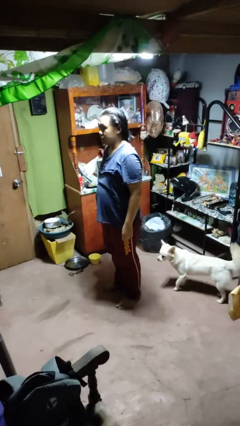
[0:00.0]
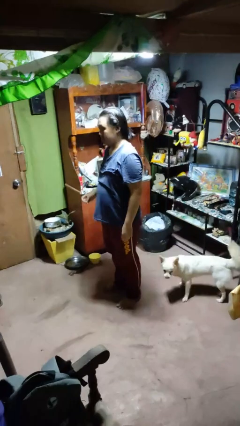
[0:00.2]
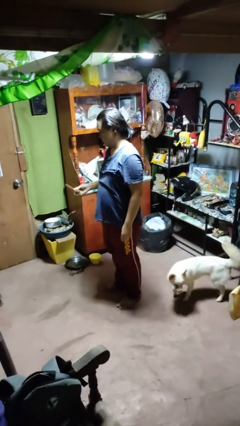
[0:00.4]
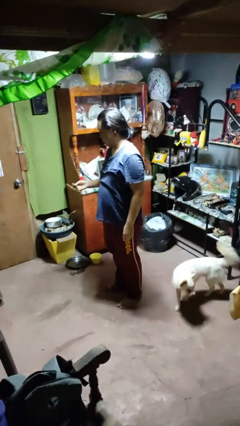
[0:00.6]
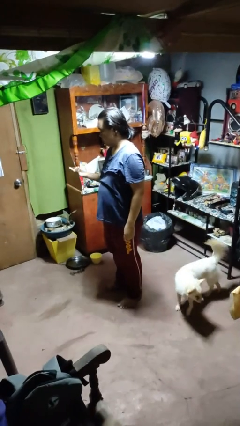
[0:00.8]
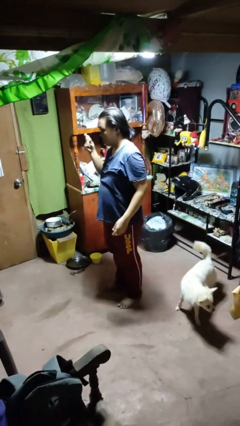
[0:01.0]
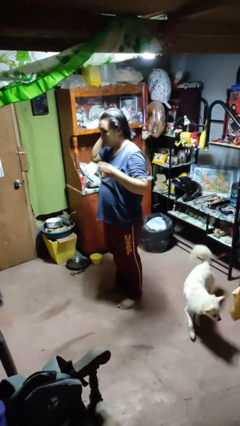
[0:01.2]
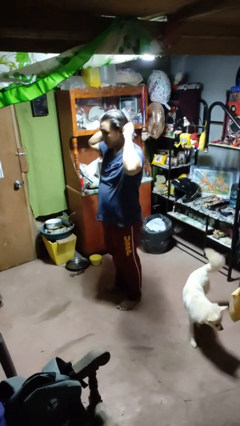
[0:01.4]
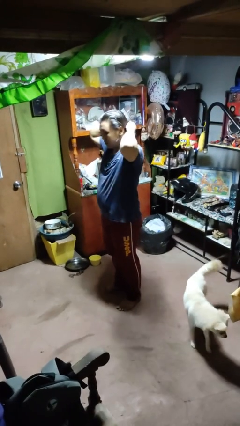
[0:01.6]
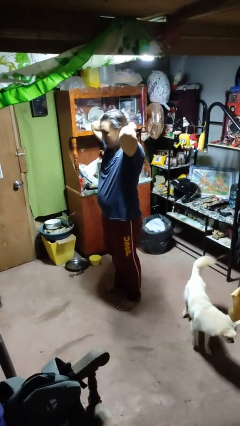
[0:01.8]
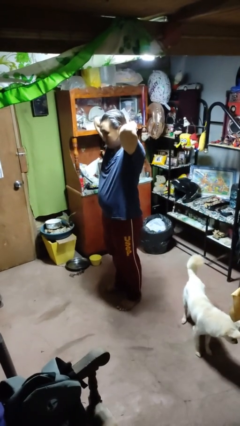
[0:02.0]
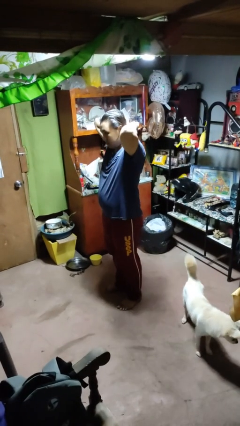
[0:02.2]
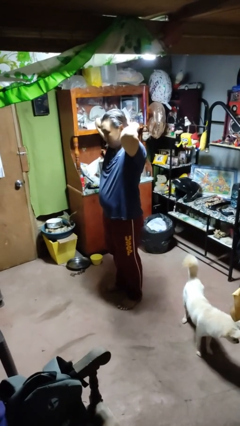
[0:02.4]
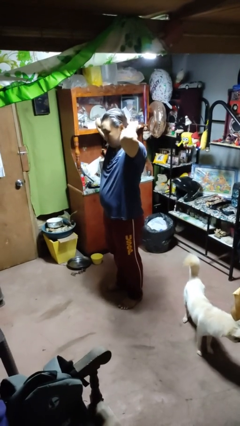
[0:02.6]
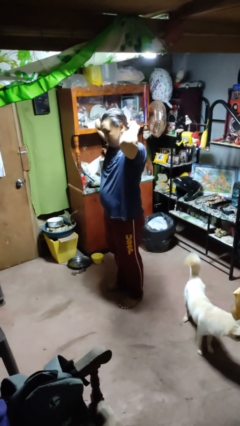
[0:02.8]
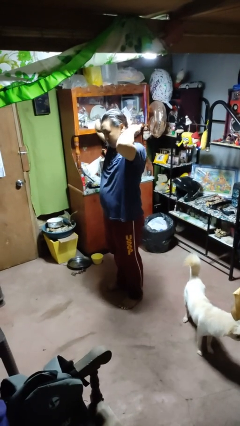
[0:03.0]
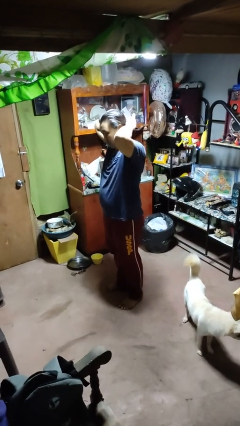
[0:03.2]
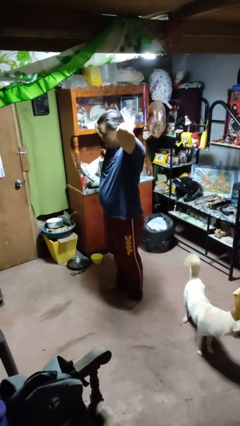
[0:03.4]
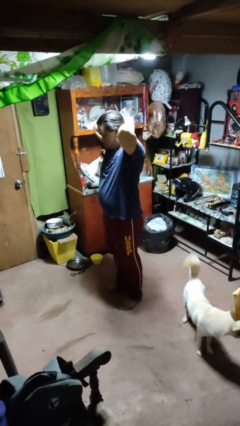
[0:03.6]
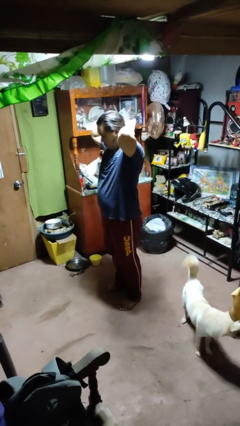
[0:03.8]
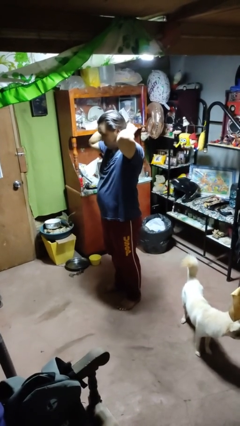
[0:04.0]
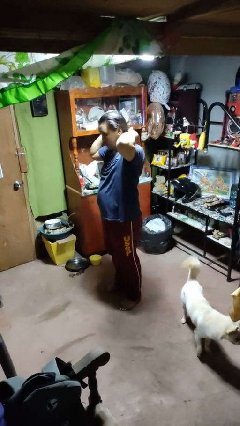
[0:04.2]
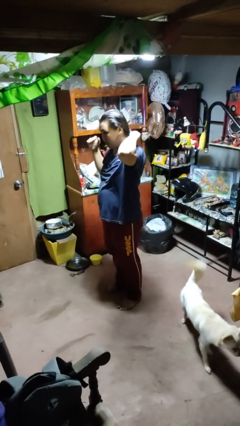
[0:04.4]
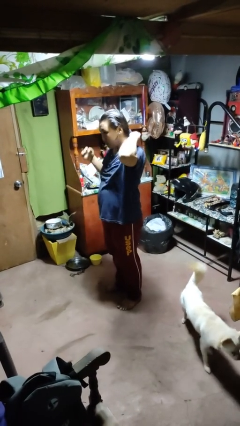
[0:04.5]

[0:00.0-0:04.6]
person puts hair in ponytail

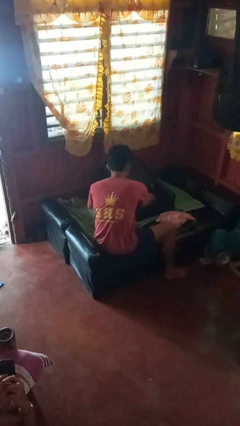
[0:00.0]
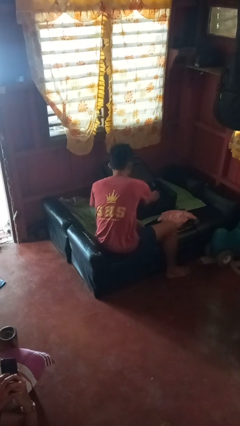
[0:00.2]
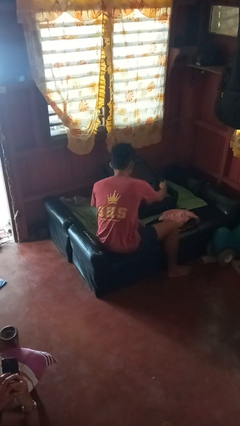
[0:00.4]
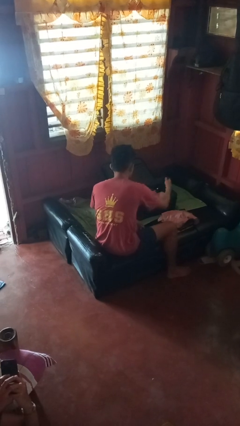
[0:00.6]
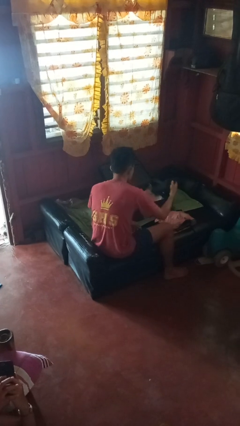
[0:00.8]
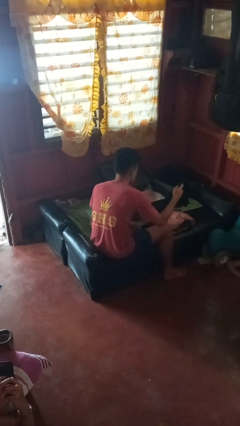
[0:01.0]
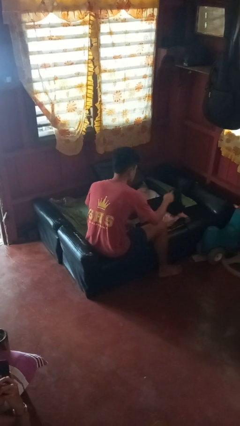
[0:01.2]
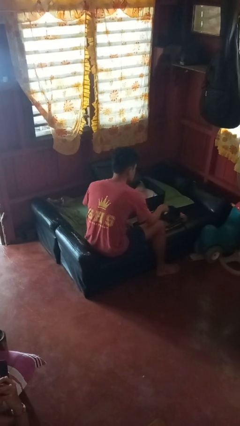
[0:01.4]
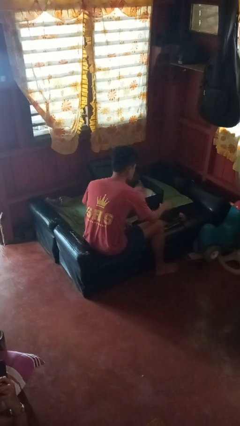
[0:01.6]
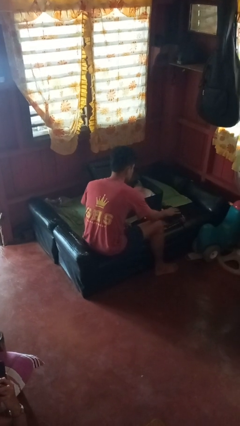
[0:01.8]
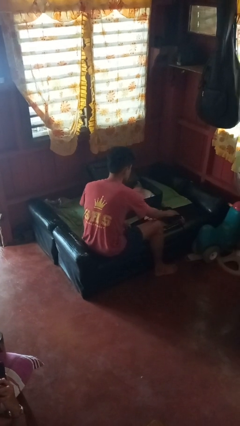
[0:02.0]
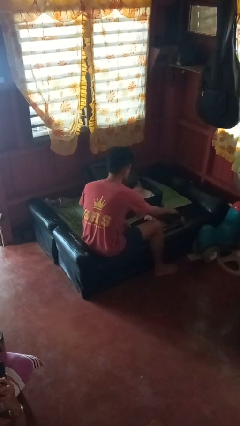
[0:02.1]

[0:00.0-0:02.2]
person unloads clothes from suitcase

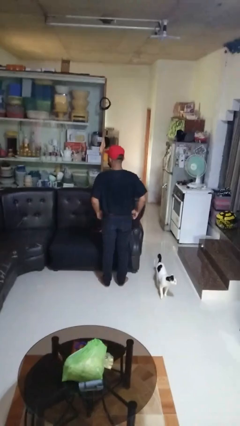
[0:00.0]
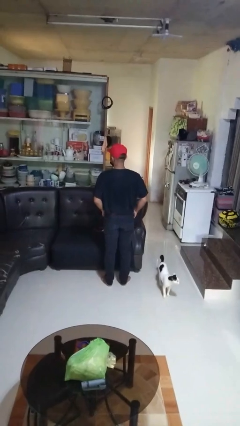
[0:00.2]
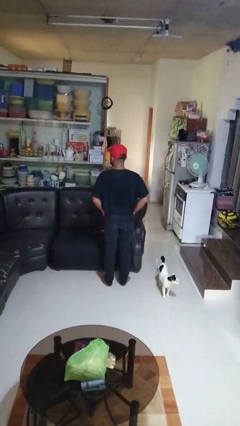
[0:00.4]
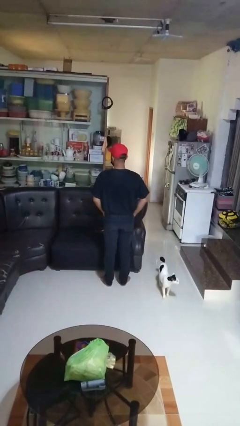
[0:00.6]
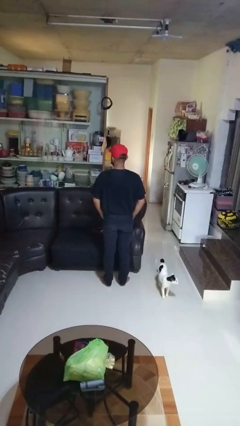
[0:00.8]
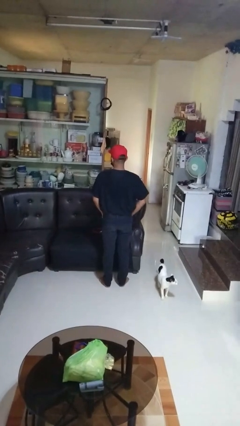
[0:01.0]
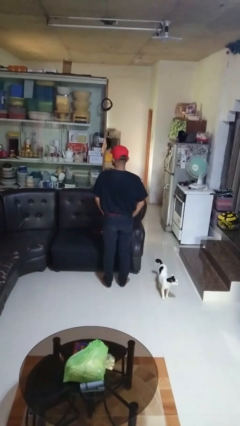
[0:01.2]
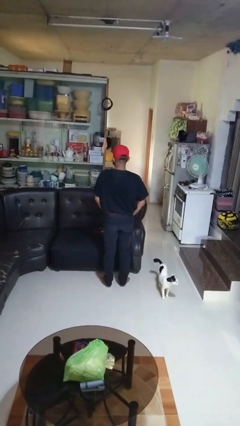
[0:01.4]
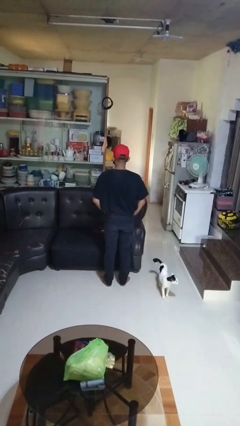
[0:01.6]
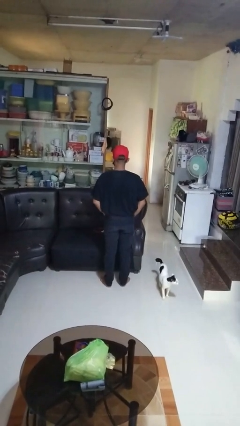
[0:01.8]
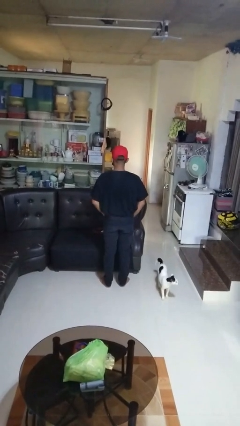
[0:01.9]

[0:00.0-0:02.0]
person puts hands in back pockets

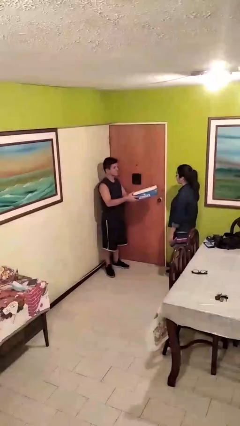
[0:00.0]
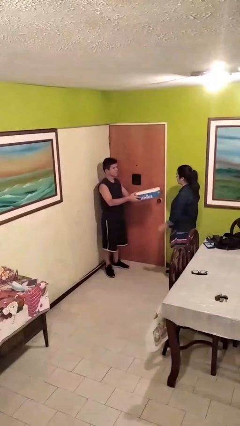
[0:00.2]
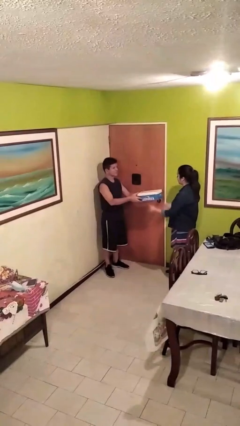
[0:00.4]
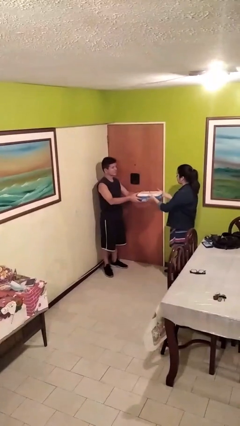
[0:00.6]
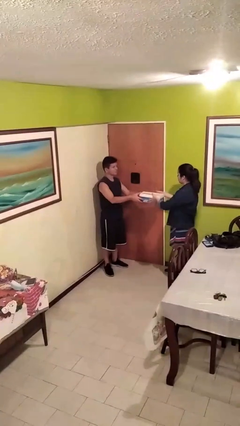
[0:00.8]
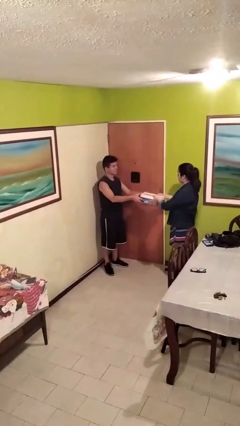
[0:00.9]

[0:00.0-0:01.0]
person transfers object to person

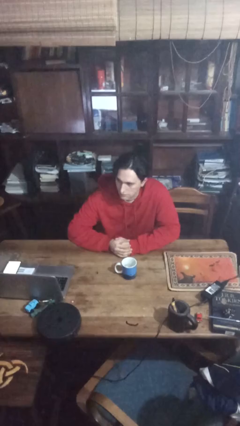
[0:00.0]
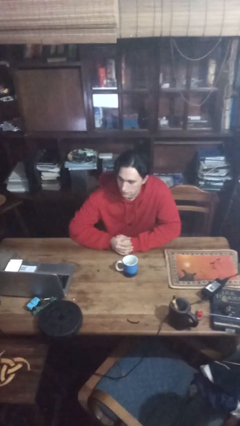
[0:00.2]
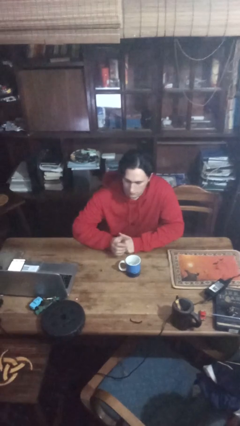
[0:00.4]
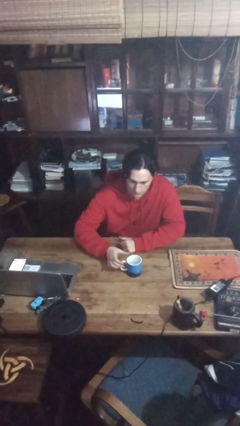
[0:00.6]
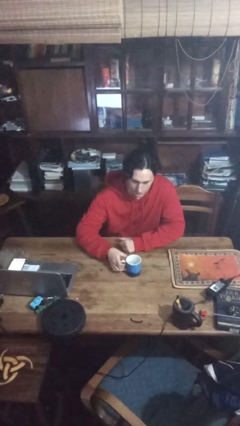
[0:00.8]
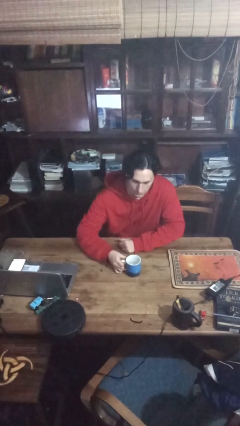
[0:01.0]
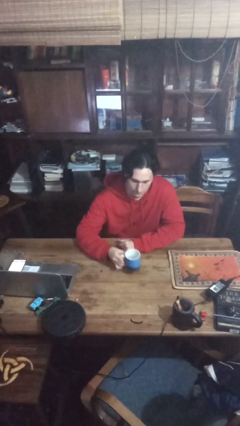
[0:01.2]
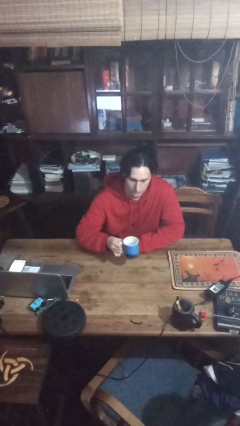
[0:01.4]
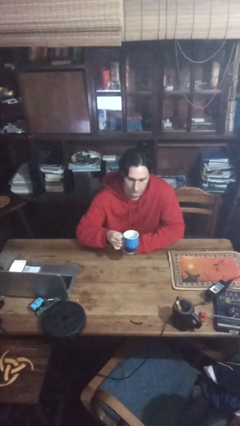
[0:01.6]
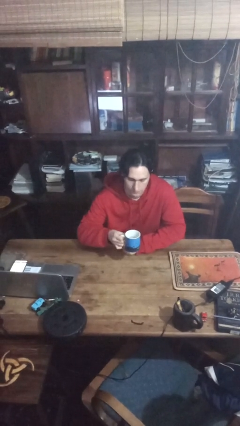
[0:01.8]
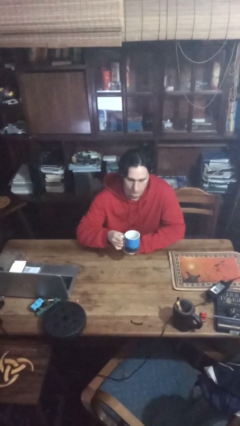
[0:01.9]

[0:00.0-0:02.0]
person picks up object from table

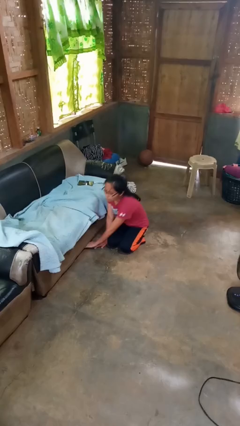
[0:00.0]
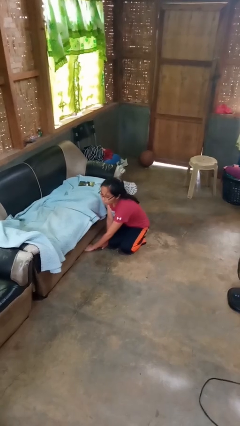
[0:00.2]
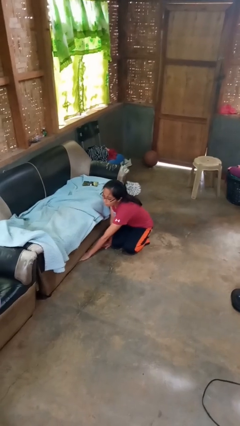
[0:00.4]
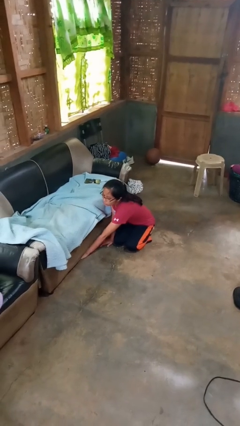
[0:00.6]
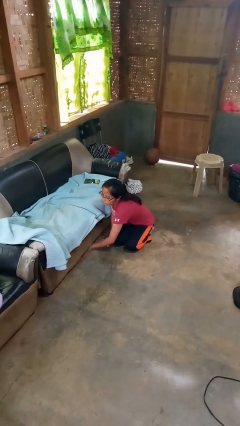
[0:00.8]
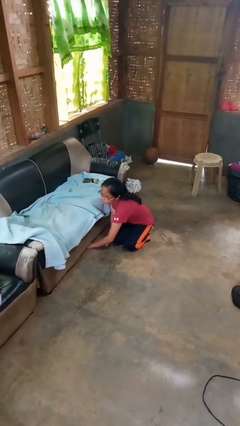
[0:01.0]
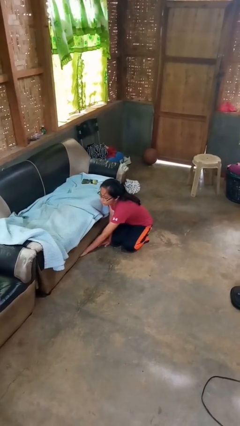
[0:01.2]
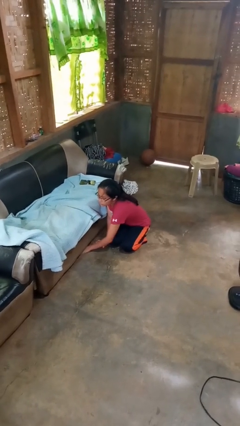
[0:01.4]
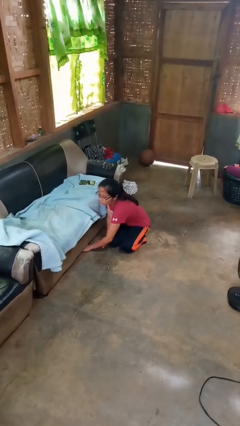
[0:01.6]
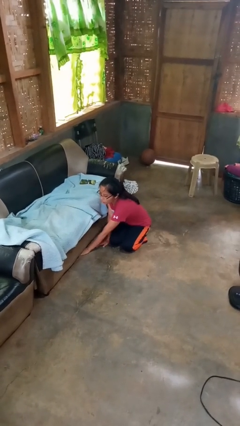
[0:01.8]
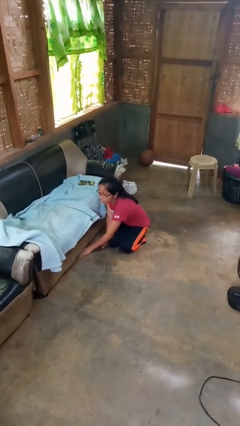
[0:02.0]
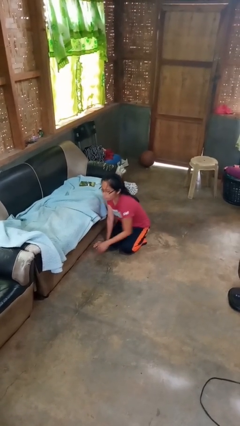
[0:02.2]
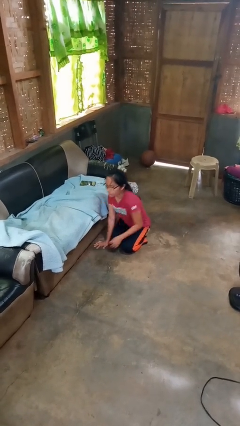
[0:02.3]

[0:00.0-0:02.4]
person searches under couch

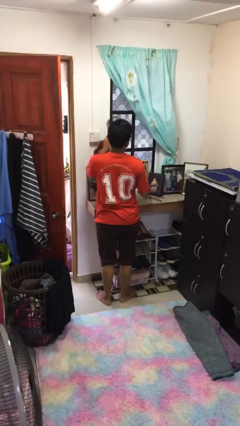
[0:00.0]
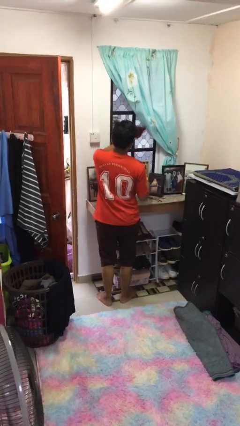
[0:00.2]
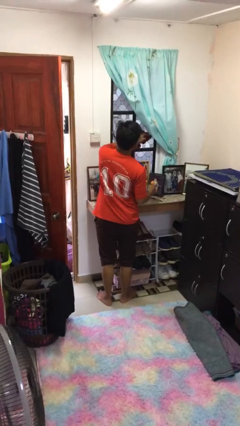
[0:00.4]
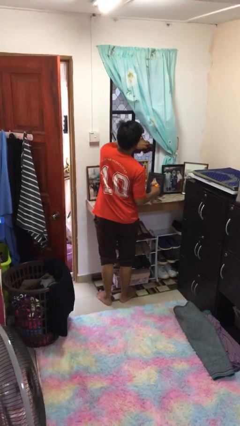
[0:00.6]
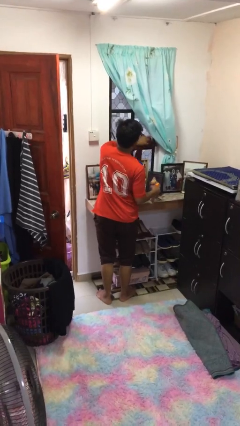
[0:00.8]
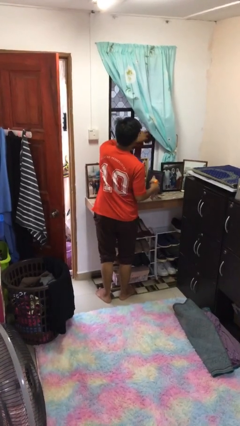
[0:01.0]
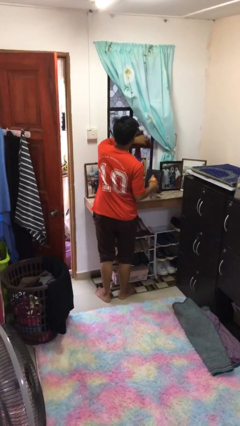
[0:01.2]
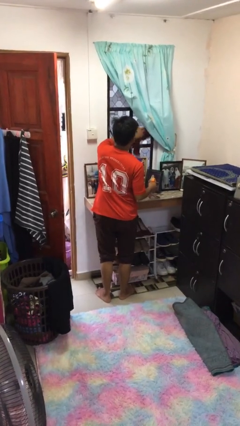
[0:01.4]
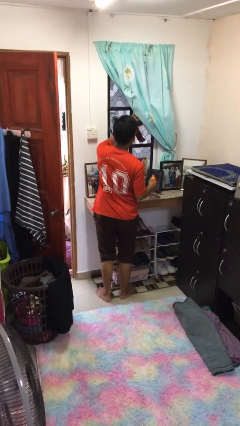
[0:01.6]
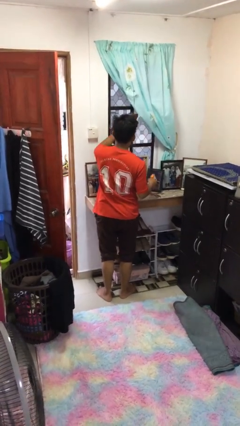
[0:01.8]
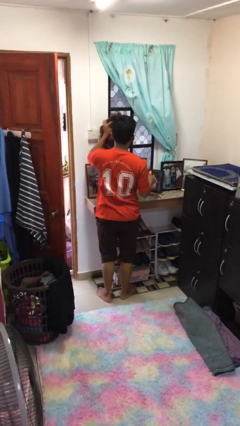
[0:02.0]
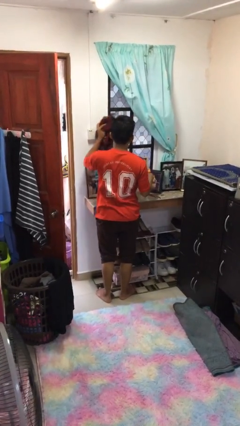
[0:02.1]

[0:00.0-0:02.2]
person washes window

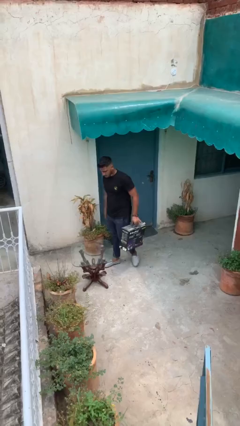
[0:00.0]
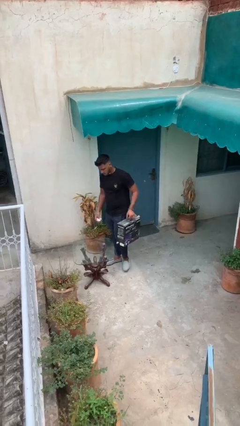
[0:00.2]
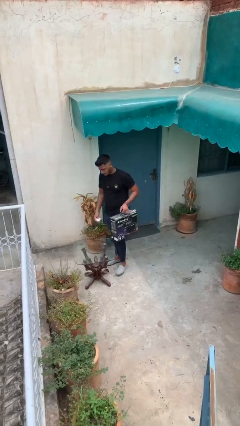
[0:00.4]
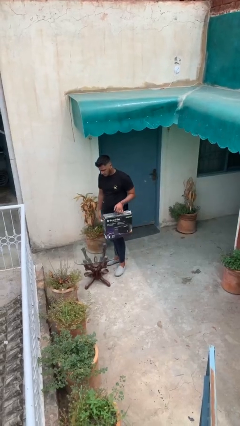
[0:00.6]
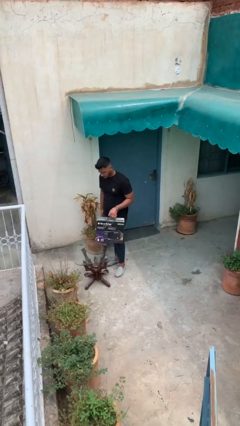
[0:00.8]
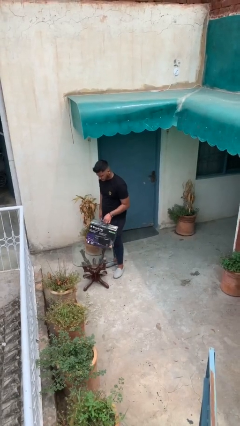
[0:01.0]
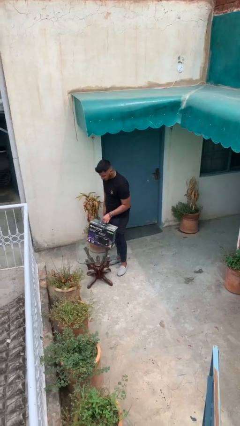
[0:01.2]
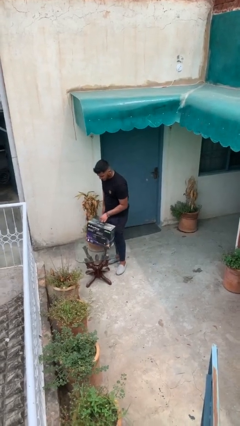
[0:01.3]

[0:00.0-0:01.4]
person puts down object on table
